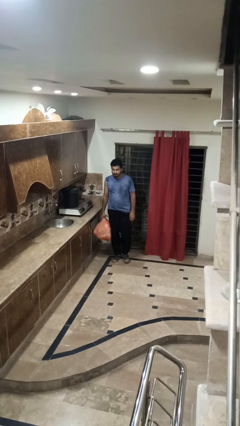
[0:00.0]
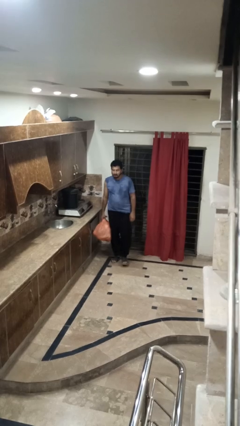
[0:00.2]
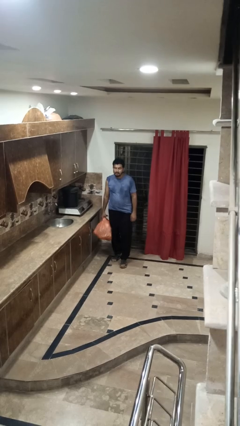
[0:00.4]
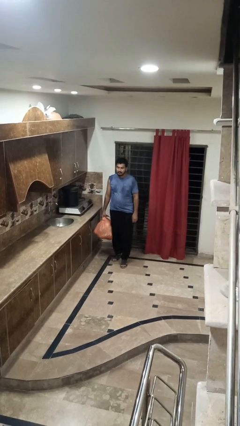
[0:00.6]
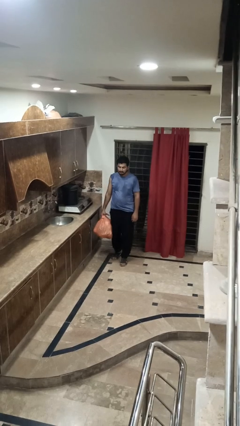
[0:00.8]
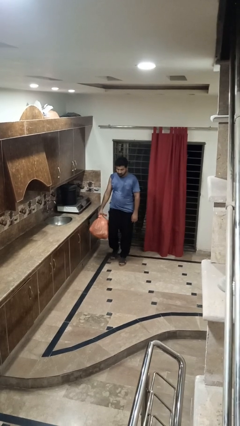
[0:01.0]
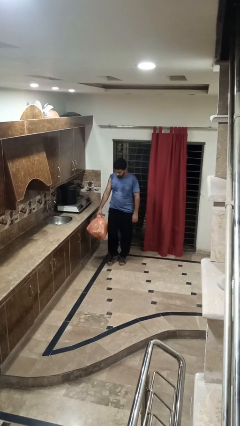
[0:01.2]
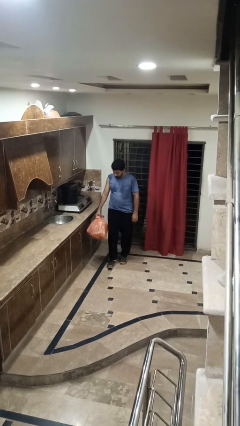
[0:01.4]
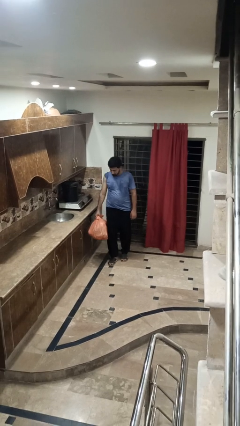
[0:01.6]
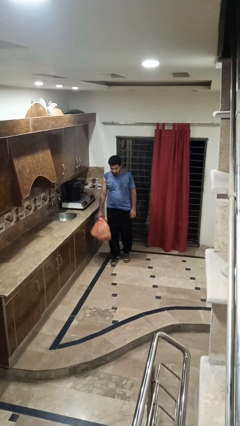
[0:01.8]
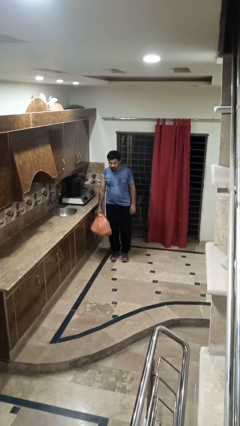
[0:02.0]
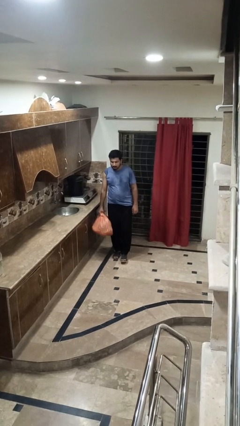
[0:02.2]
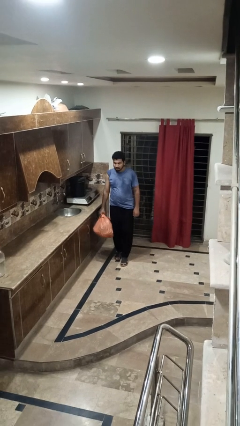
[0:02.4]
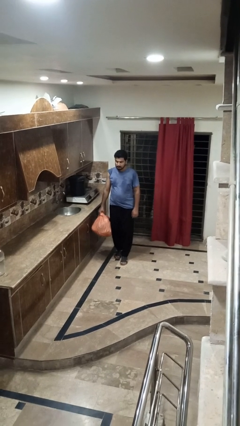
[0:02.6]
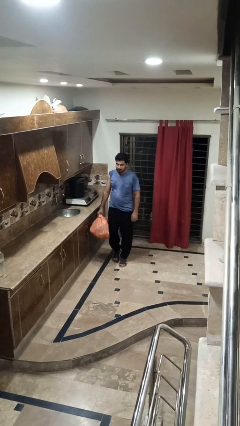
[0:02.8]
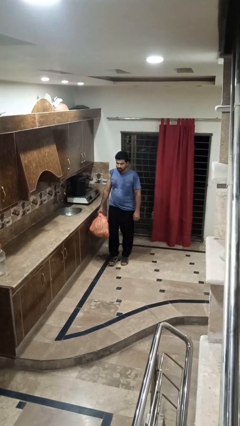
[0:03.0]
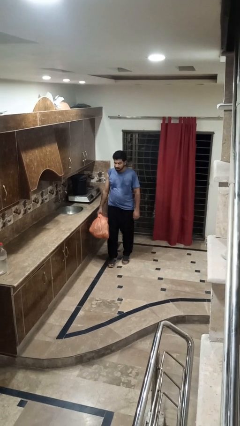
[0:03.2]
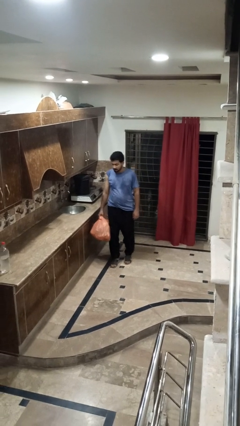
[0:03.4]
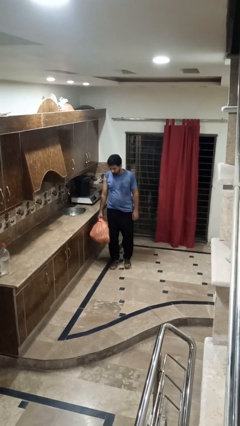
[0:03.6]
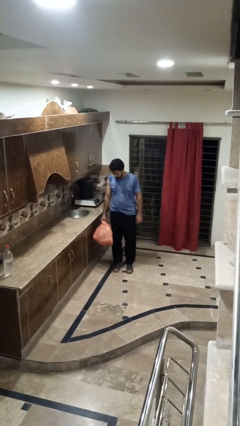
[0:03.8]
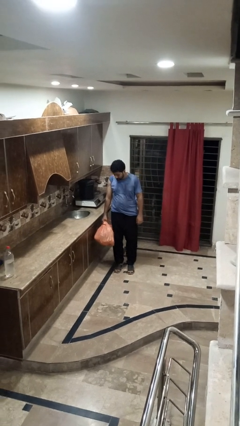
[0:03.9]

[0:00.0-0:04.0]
person carries groceries

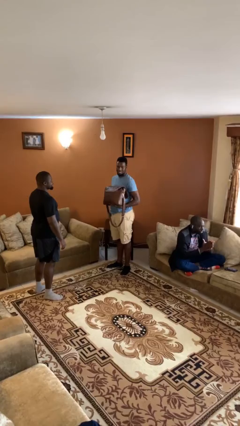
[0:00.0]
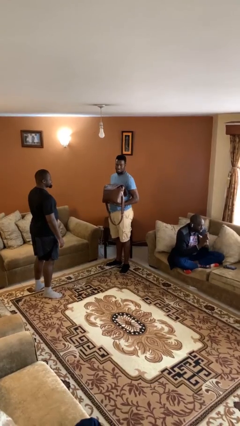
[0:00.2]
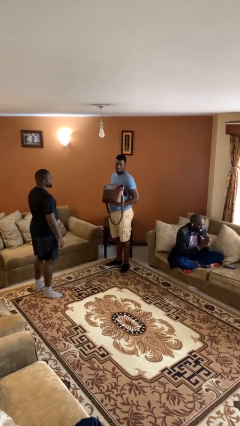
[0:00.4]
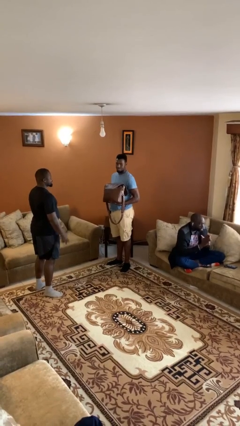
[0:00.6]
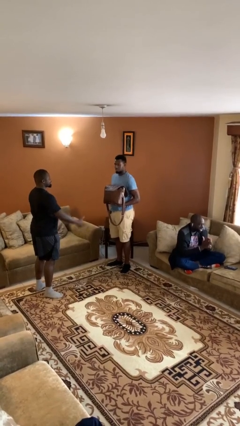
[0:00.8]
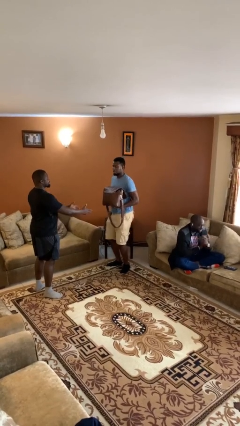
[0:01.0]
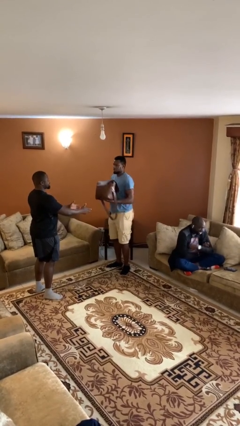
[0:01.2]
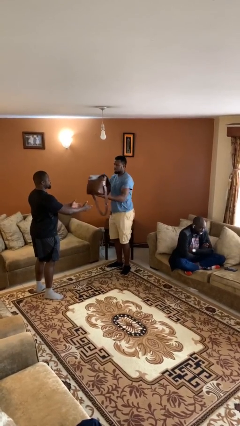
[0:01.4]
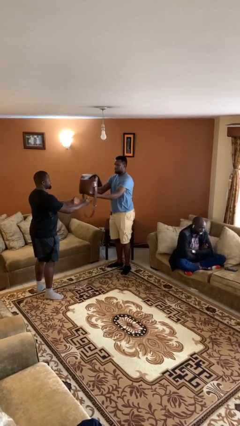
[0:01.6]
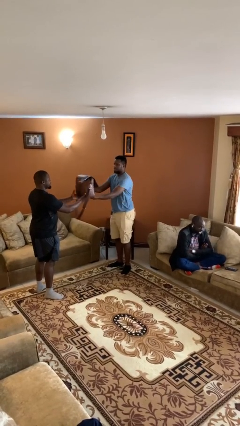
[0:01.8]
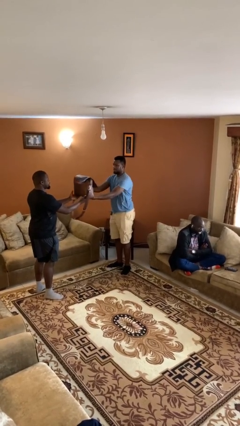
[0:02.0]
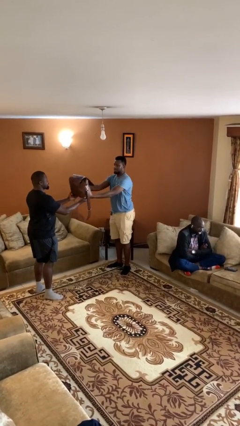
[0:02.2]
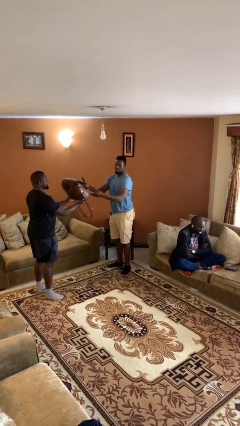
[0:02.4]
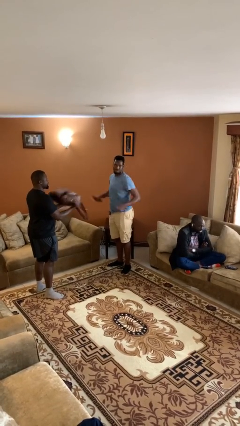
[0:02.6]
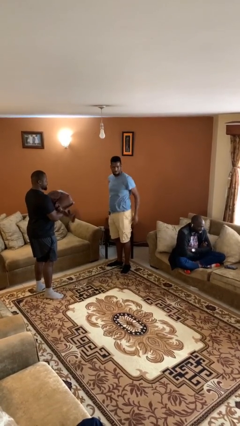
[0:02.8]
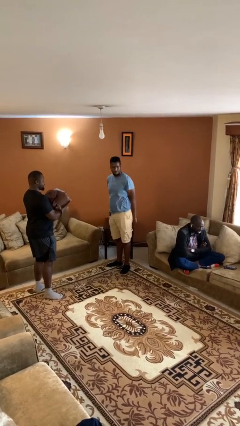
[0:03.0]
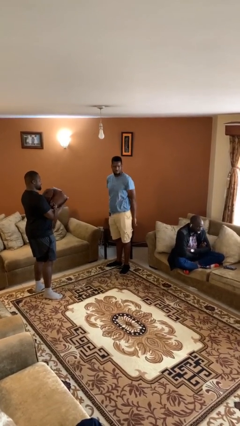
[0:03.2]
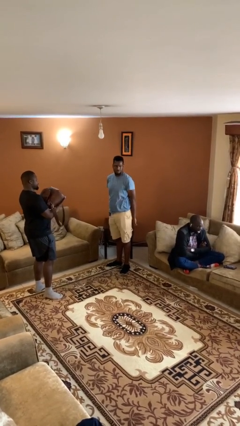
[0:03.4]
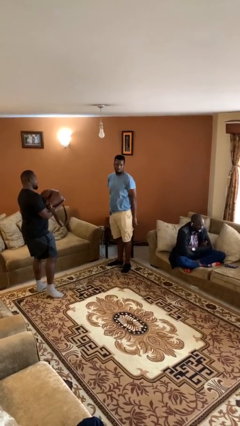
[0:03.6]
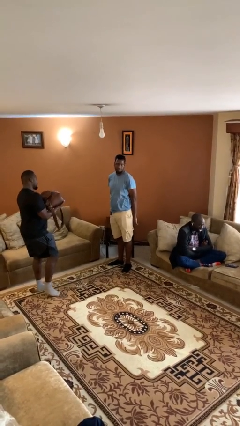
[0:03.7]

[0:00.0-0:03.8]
person transfers object to person

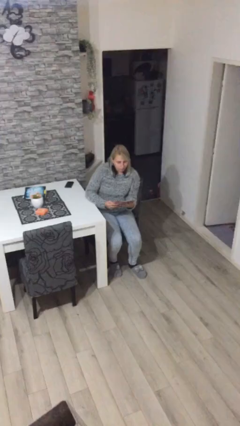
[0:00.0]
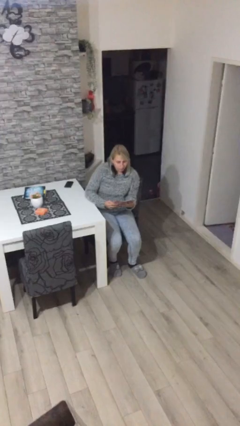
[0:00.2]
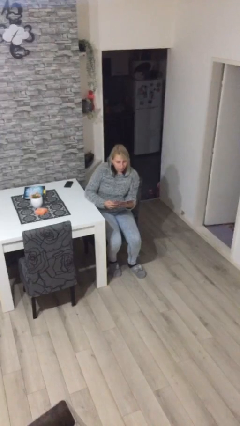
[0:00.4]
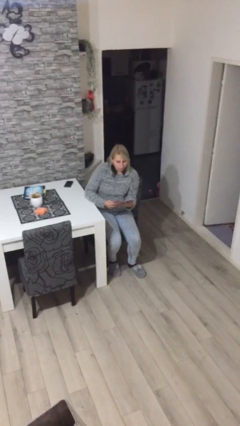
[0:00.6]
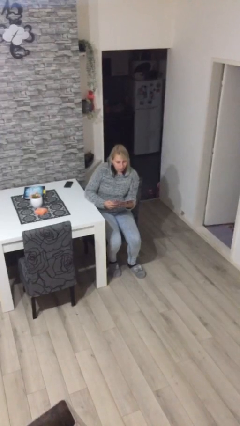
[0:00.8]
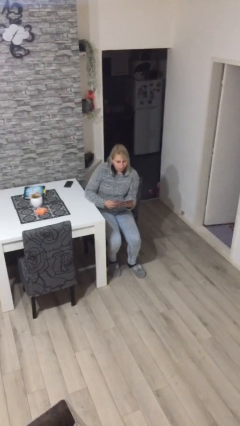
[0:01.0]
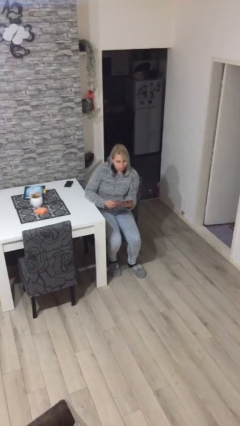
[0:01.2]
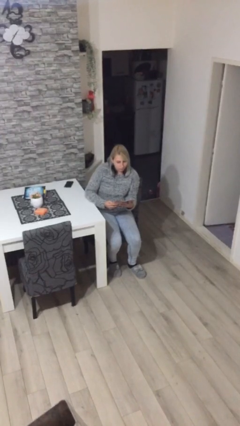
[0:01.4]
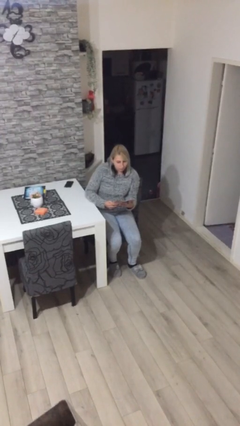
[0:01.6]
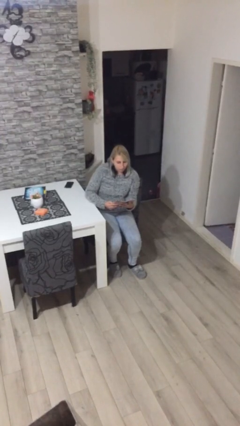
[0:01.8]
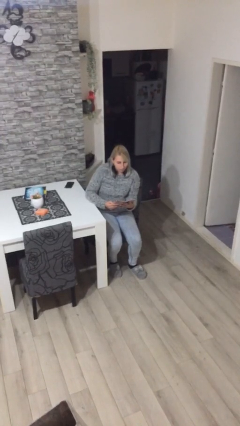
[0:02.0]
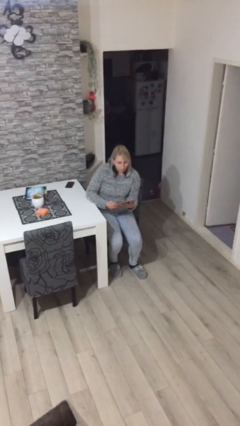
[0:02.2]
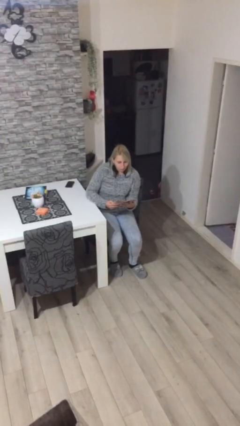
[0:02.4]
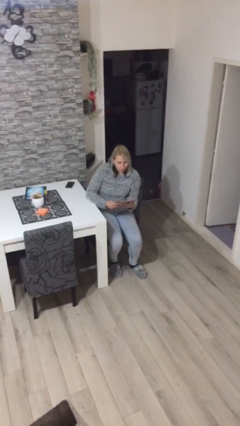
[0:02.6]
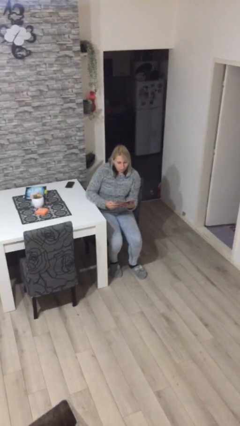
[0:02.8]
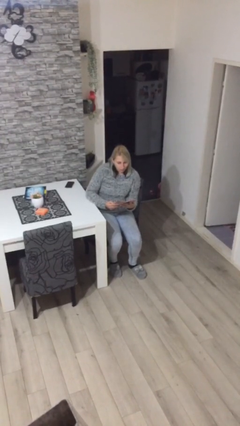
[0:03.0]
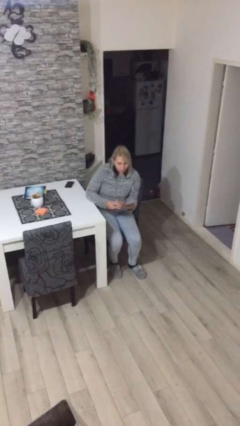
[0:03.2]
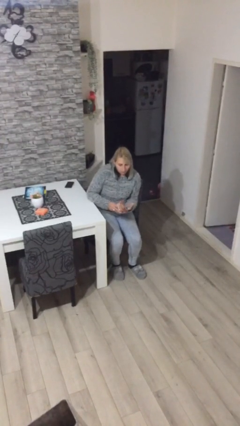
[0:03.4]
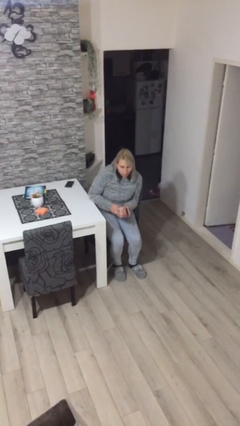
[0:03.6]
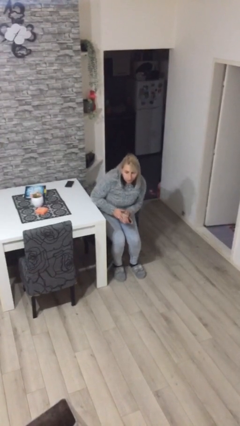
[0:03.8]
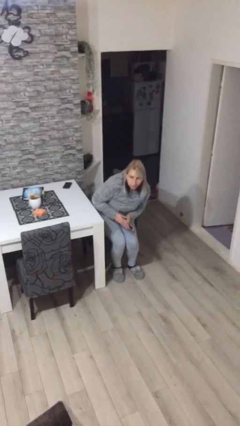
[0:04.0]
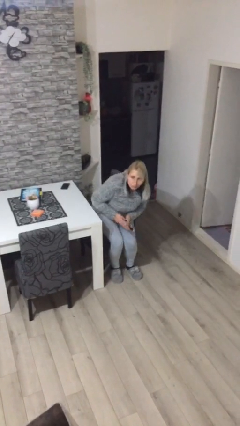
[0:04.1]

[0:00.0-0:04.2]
person reads document

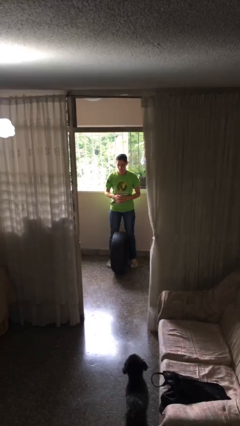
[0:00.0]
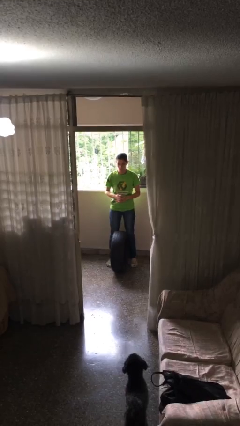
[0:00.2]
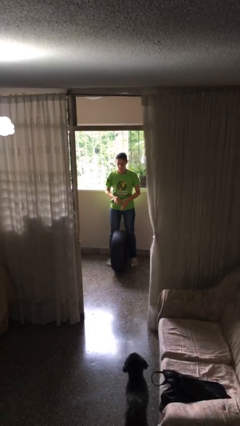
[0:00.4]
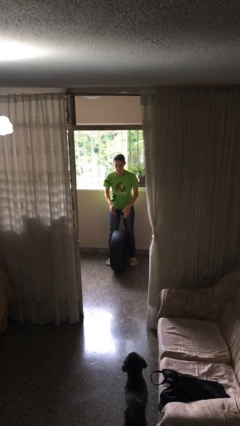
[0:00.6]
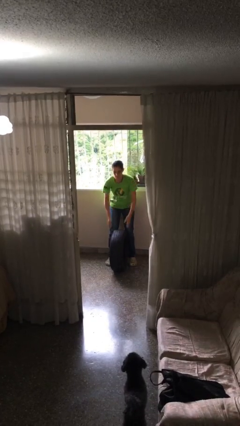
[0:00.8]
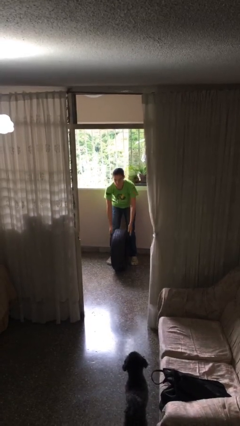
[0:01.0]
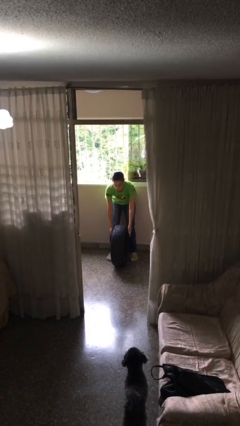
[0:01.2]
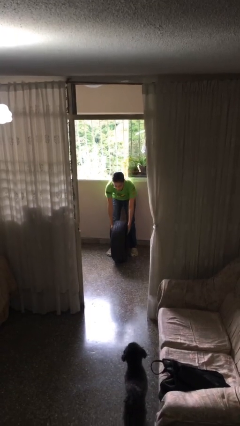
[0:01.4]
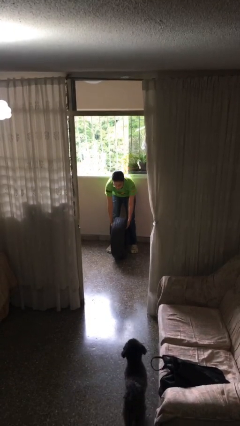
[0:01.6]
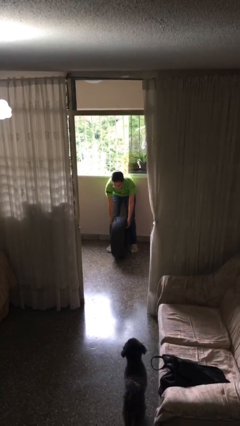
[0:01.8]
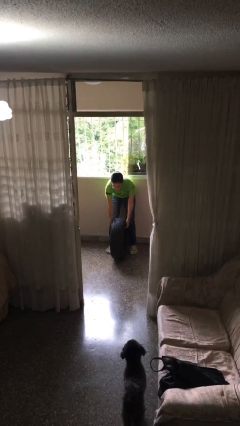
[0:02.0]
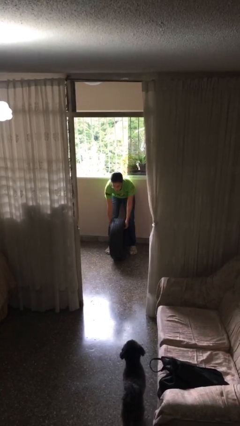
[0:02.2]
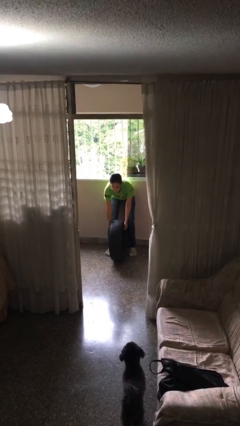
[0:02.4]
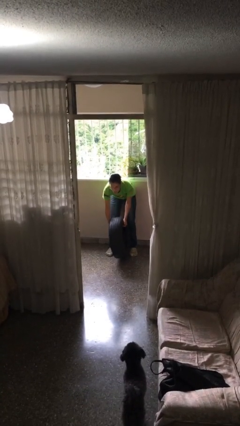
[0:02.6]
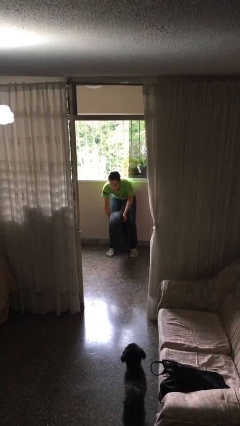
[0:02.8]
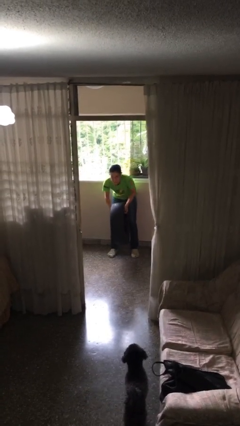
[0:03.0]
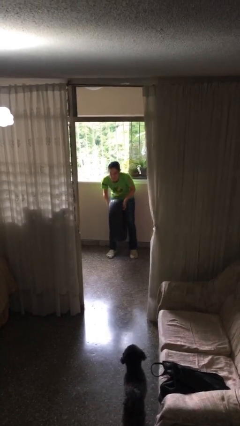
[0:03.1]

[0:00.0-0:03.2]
person picks up object from floor

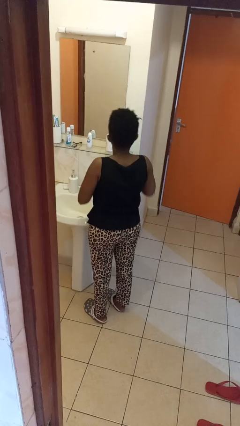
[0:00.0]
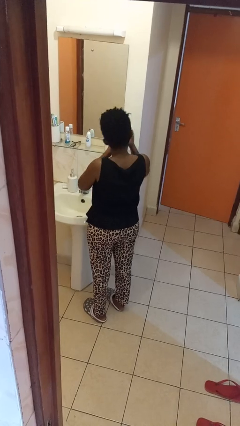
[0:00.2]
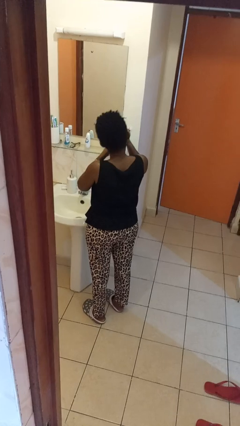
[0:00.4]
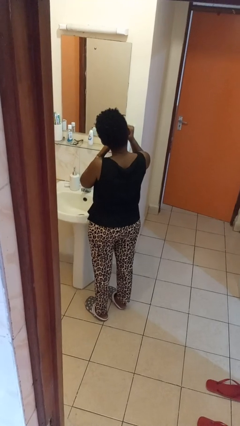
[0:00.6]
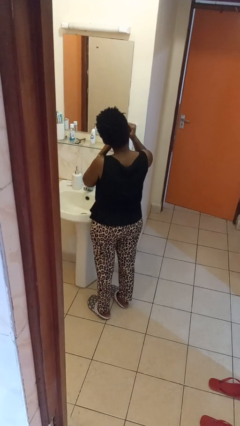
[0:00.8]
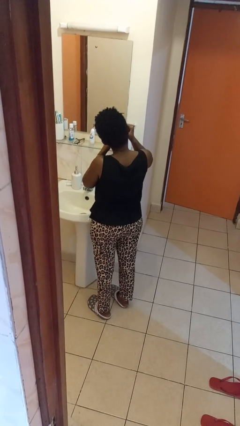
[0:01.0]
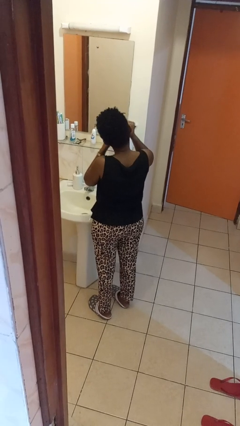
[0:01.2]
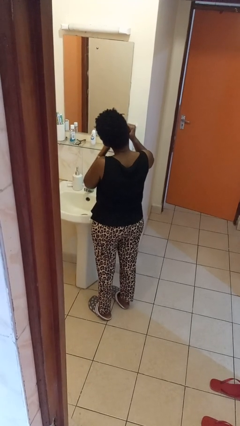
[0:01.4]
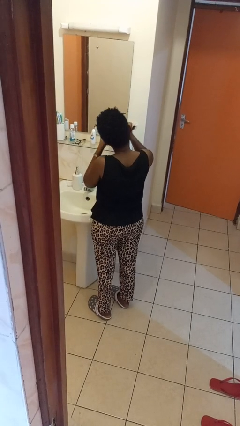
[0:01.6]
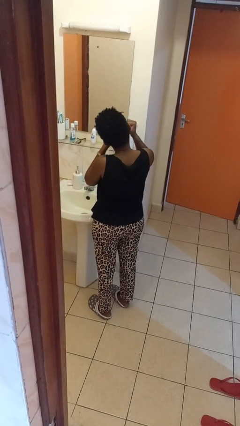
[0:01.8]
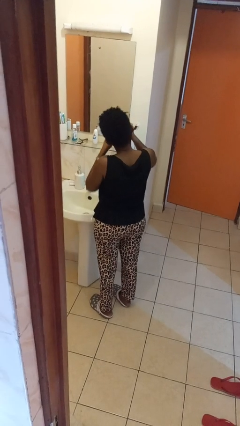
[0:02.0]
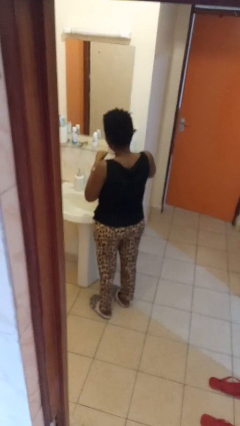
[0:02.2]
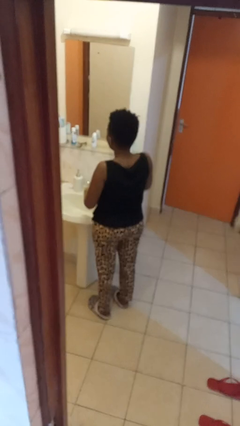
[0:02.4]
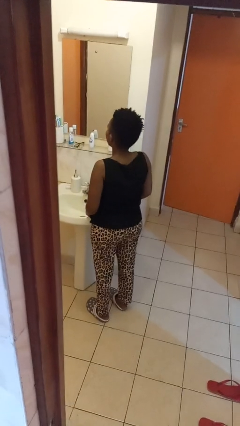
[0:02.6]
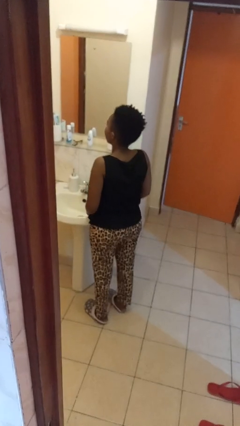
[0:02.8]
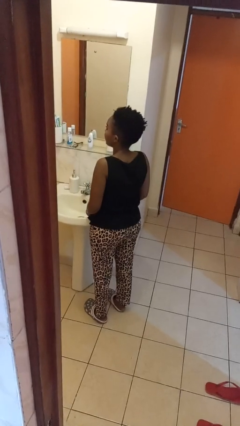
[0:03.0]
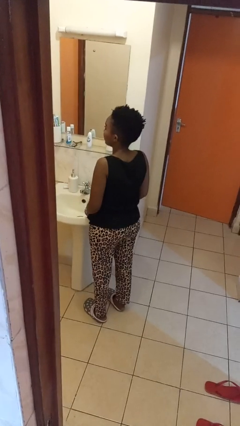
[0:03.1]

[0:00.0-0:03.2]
person flosses
